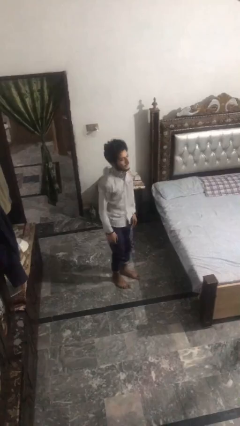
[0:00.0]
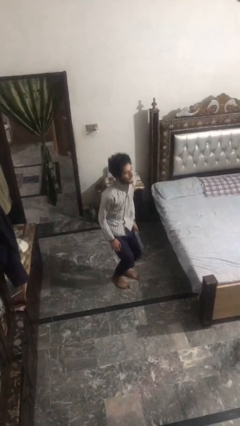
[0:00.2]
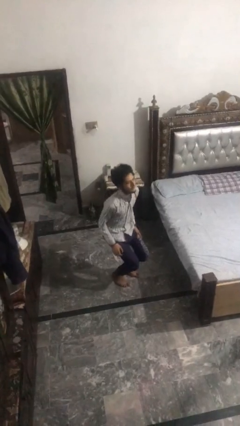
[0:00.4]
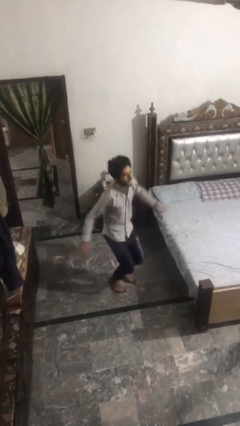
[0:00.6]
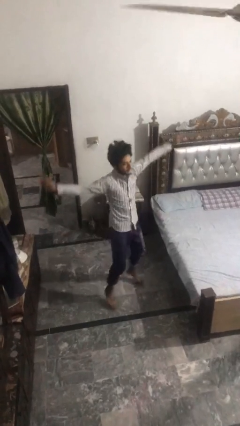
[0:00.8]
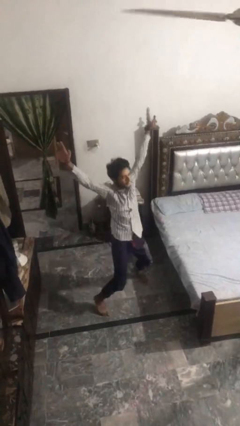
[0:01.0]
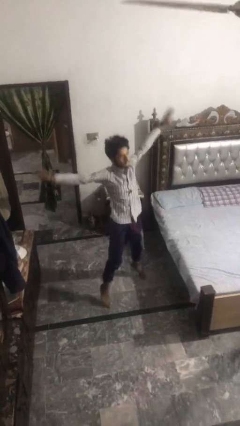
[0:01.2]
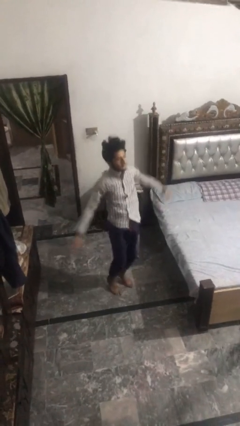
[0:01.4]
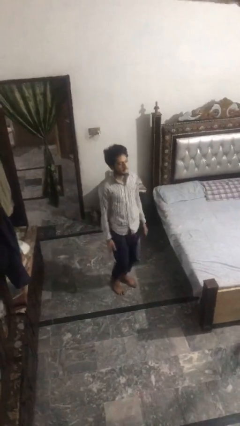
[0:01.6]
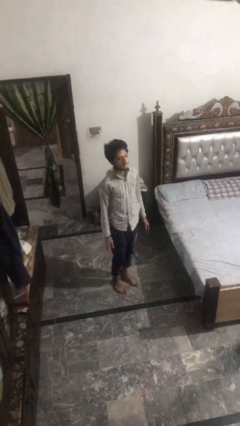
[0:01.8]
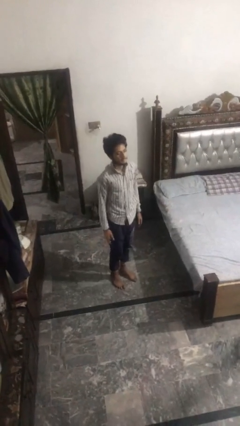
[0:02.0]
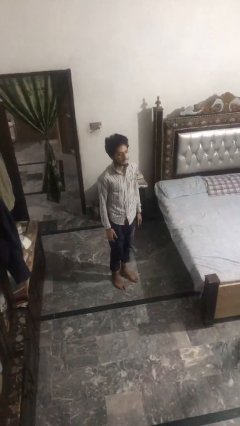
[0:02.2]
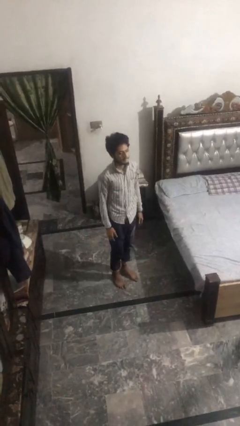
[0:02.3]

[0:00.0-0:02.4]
person exercises with jumping jacks

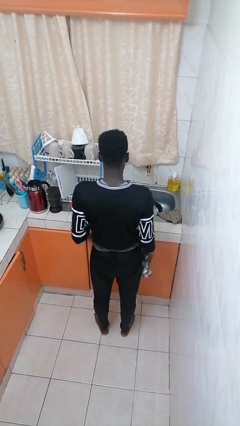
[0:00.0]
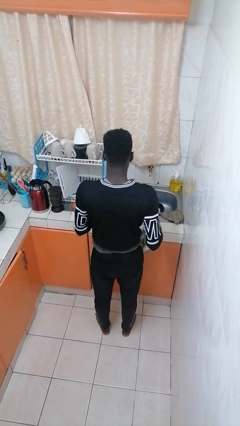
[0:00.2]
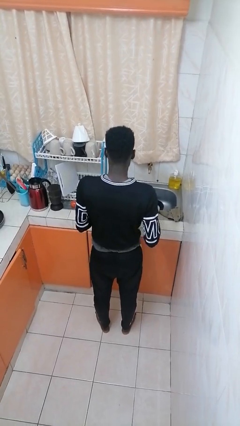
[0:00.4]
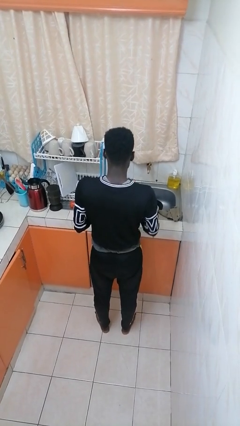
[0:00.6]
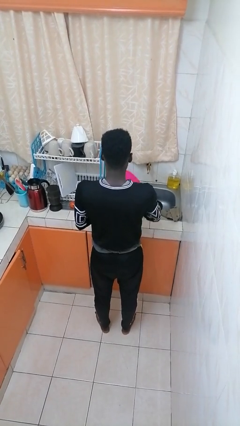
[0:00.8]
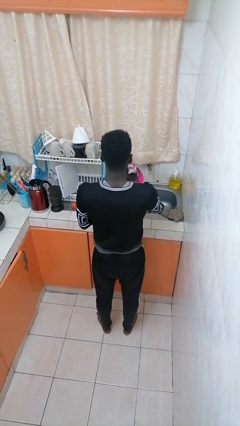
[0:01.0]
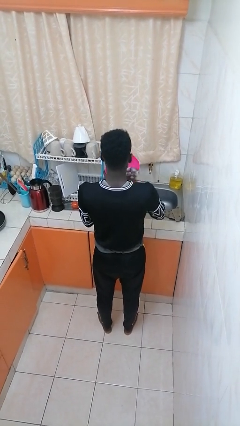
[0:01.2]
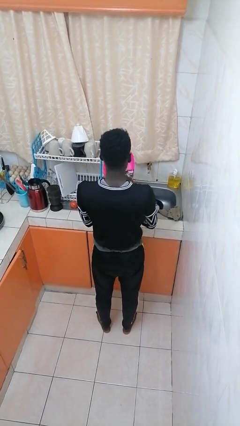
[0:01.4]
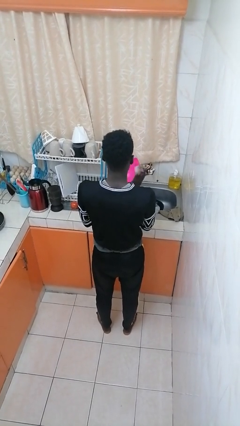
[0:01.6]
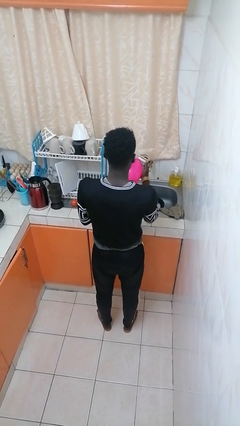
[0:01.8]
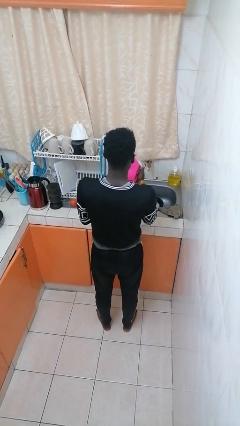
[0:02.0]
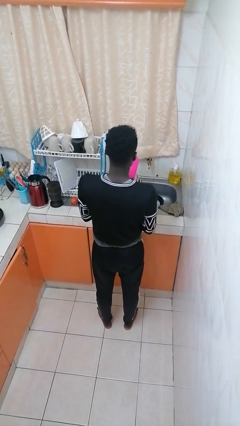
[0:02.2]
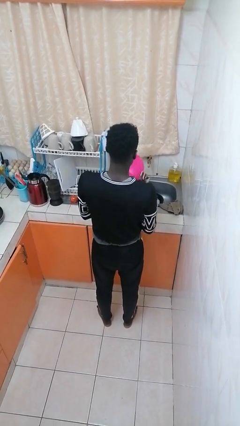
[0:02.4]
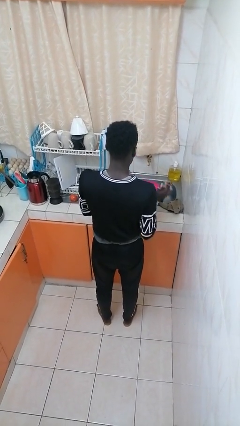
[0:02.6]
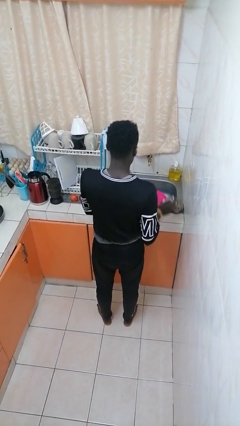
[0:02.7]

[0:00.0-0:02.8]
person dries dish

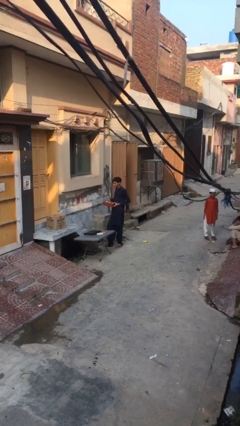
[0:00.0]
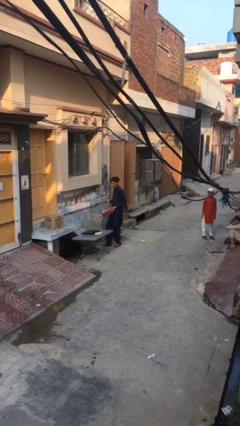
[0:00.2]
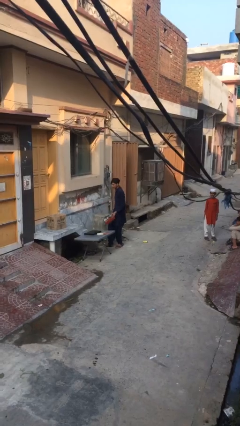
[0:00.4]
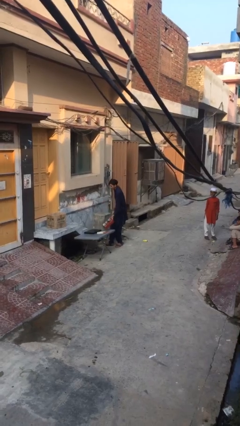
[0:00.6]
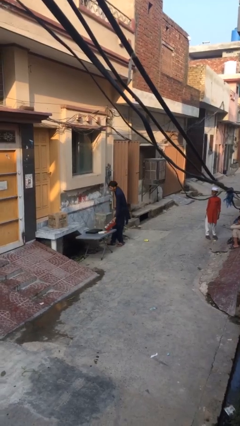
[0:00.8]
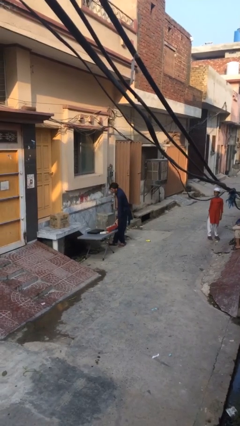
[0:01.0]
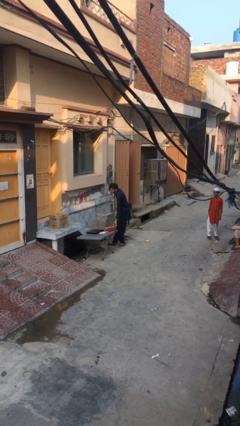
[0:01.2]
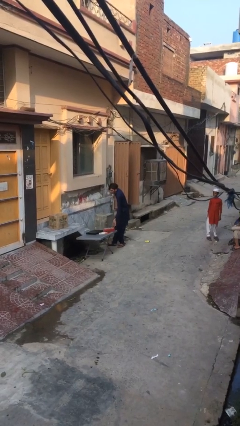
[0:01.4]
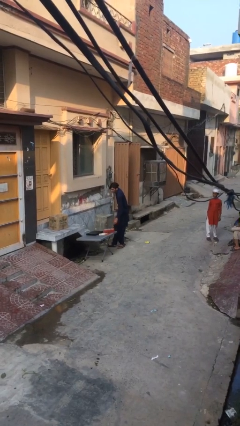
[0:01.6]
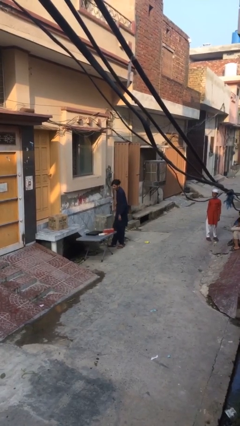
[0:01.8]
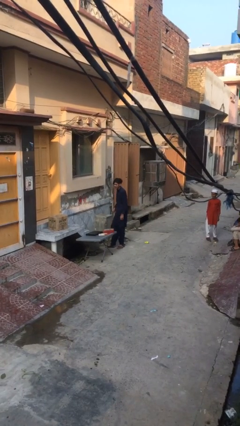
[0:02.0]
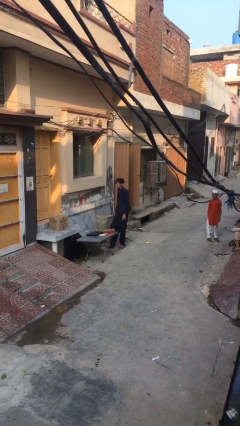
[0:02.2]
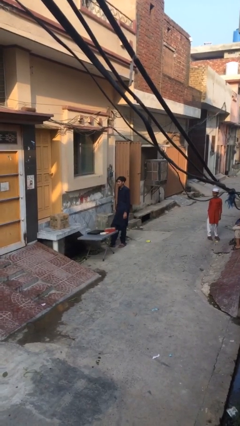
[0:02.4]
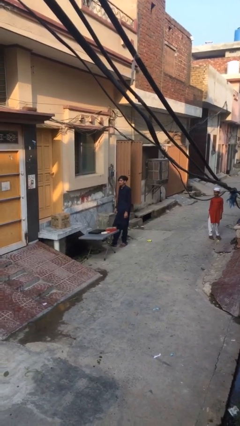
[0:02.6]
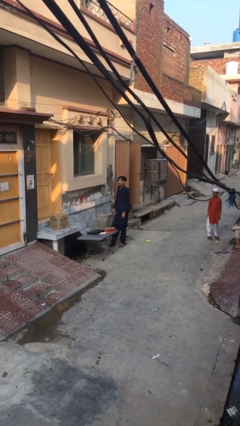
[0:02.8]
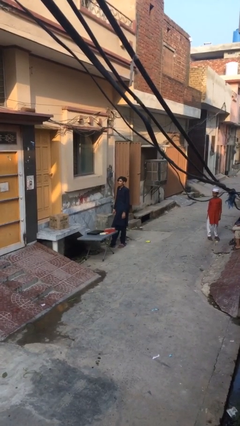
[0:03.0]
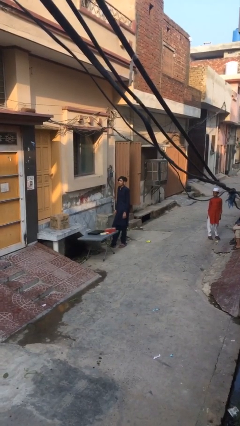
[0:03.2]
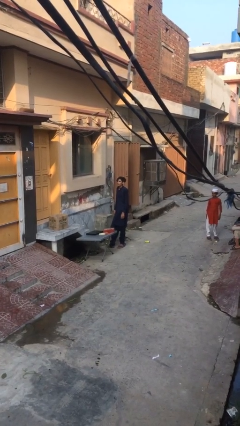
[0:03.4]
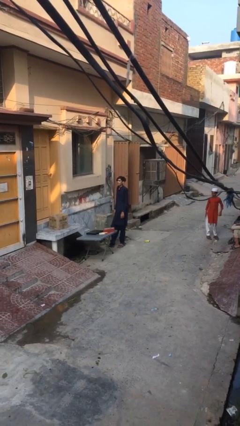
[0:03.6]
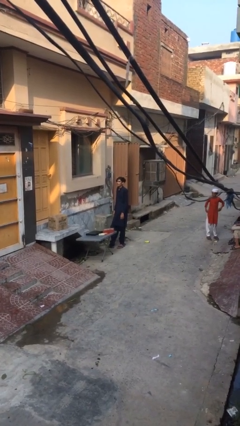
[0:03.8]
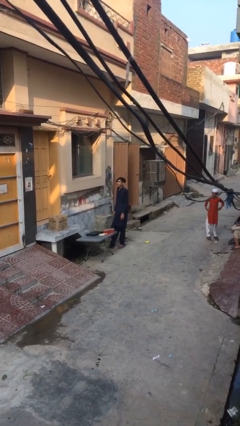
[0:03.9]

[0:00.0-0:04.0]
person puts down object on table

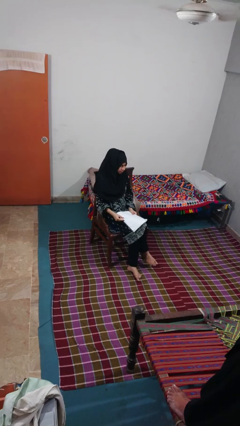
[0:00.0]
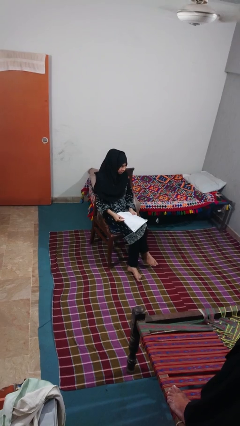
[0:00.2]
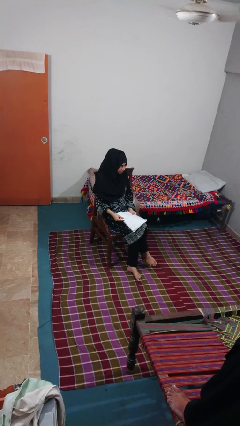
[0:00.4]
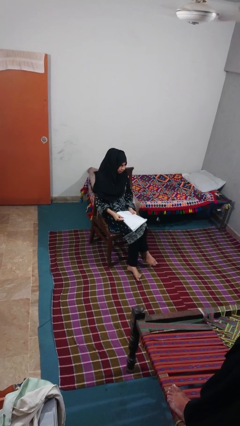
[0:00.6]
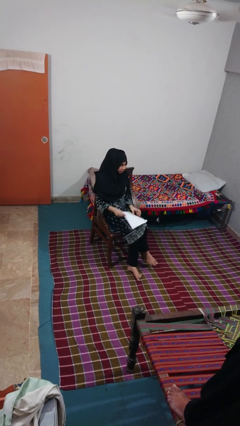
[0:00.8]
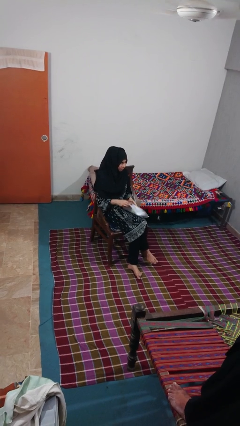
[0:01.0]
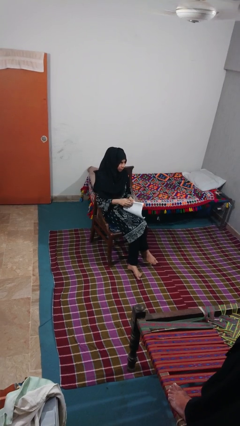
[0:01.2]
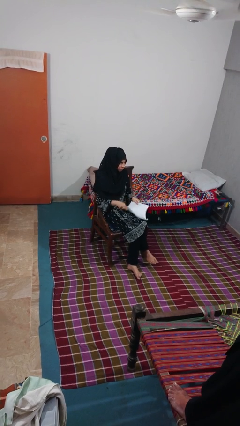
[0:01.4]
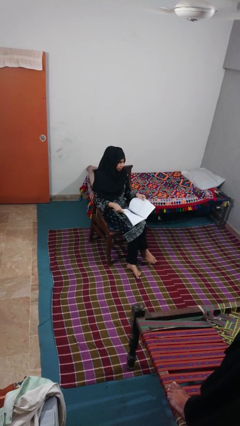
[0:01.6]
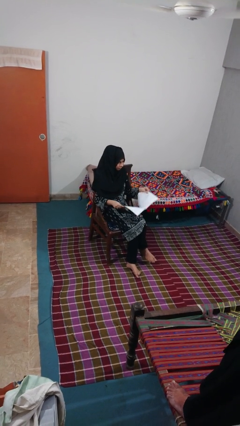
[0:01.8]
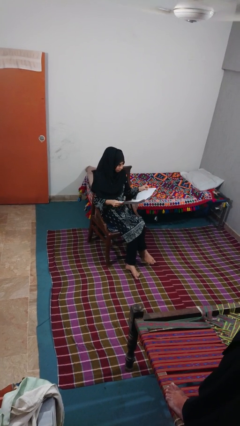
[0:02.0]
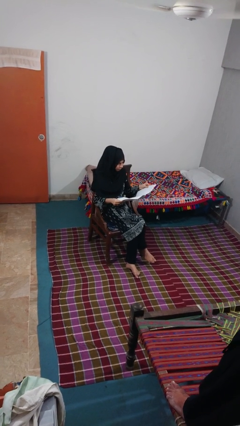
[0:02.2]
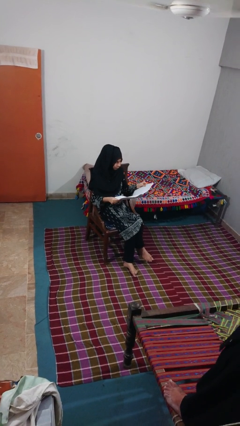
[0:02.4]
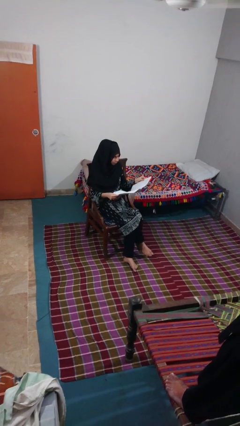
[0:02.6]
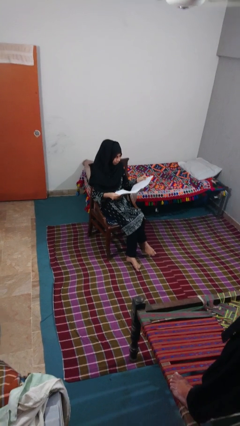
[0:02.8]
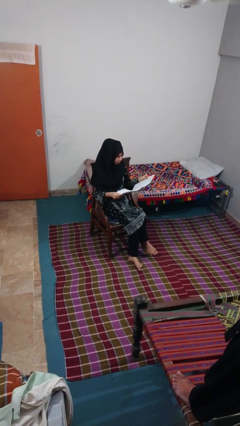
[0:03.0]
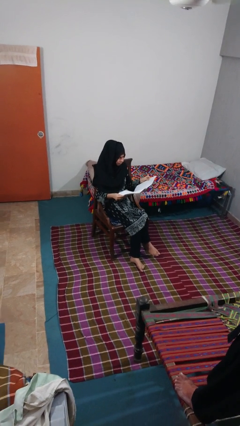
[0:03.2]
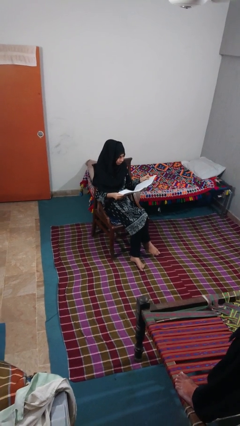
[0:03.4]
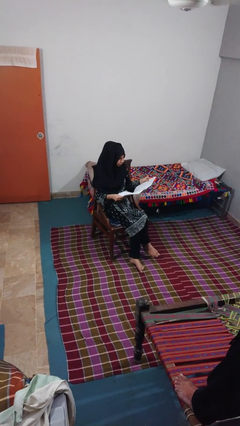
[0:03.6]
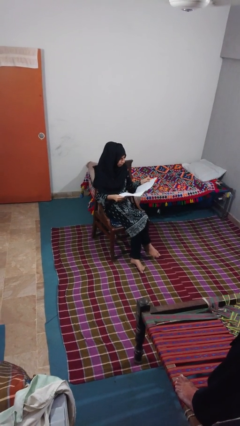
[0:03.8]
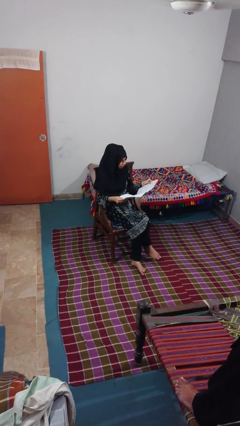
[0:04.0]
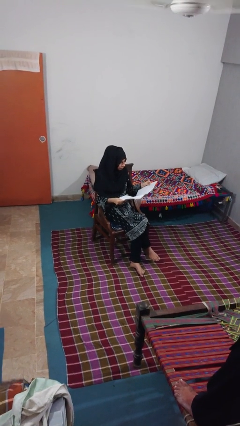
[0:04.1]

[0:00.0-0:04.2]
person reads newspaper

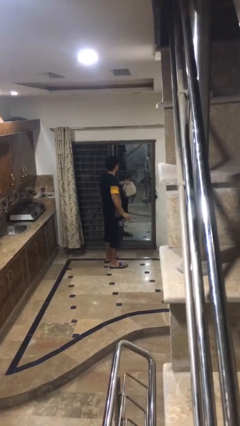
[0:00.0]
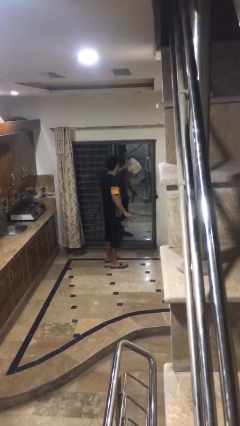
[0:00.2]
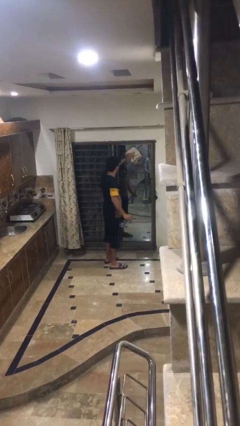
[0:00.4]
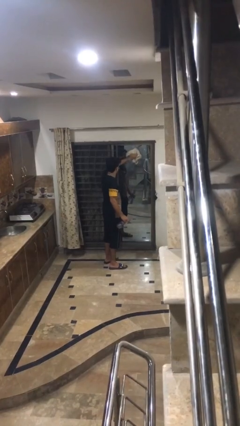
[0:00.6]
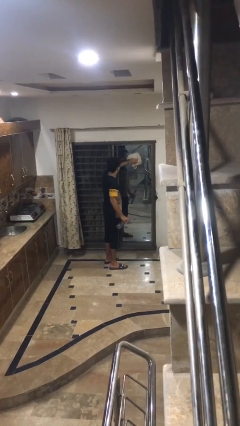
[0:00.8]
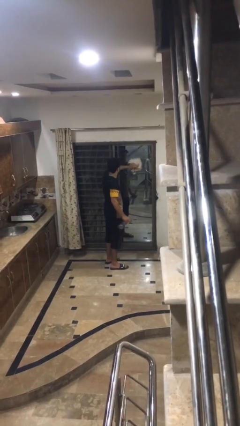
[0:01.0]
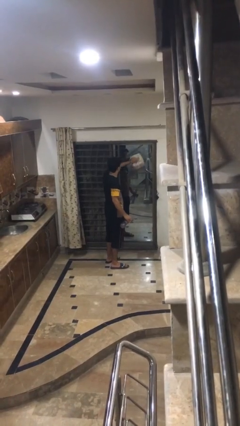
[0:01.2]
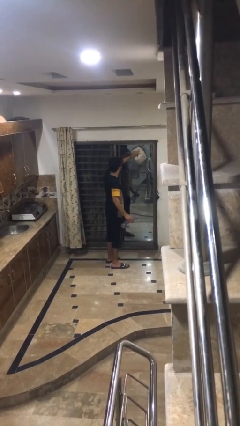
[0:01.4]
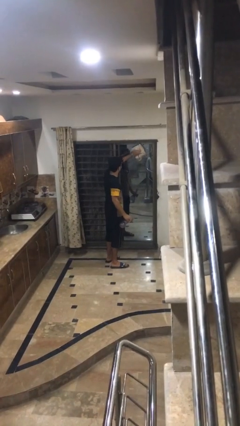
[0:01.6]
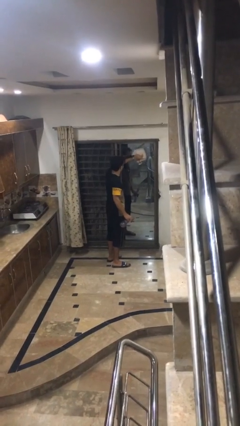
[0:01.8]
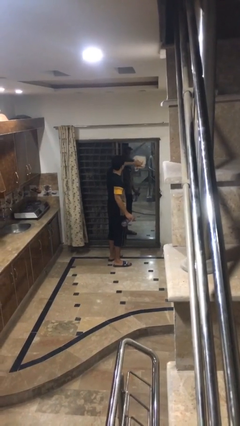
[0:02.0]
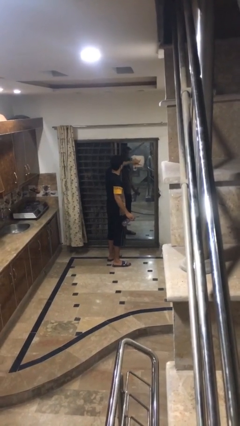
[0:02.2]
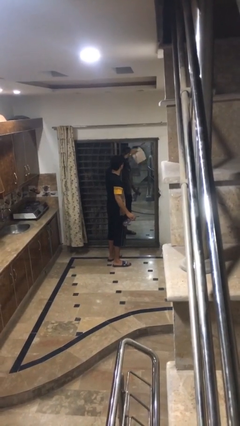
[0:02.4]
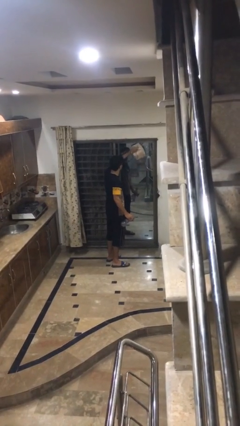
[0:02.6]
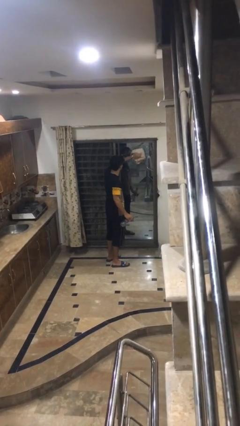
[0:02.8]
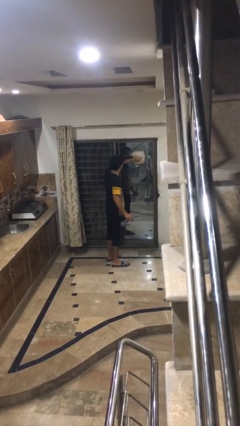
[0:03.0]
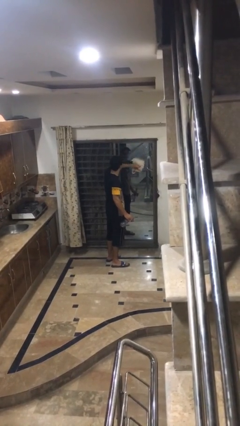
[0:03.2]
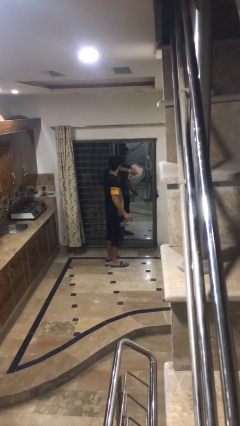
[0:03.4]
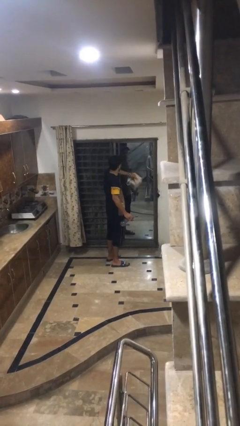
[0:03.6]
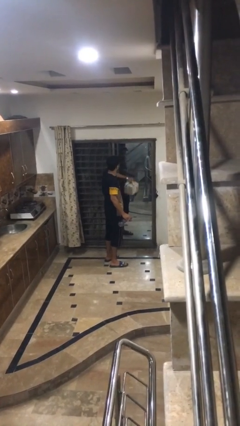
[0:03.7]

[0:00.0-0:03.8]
person washes window
